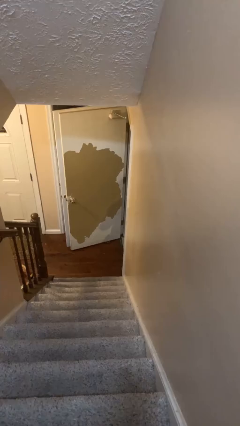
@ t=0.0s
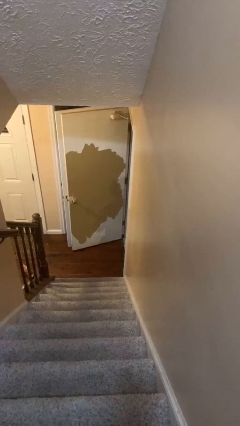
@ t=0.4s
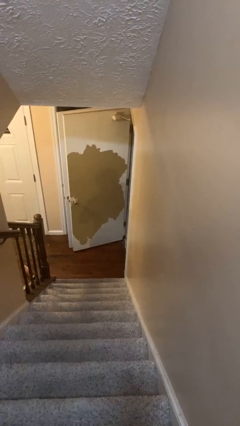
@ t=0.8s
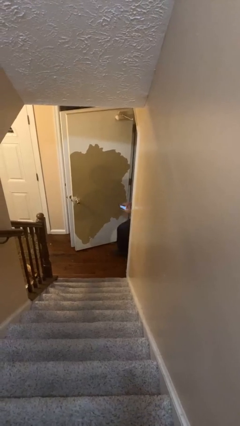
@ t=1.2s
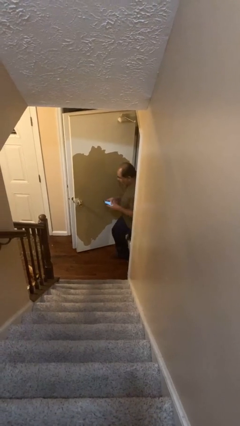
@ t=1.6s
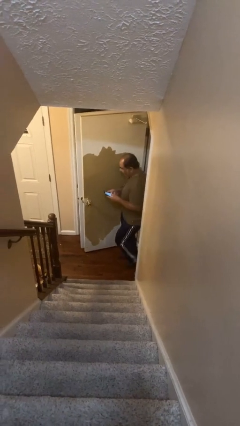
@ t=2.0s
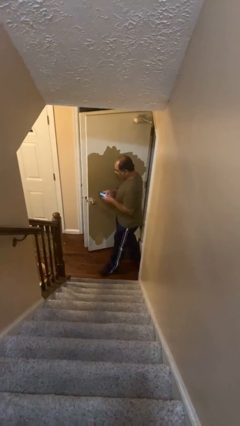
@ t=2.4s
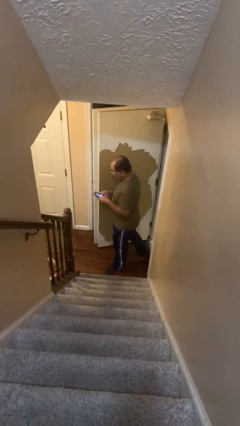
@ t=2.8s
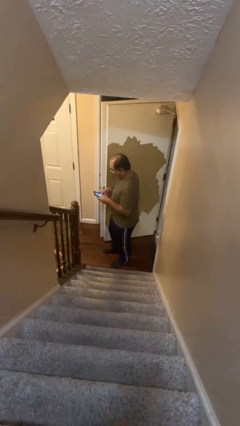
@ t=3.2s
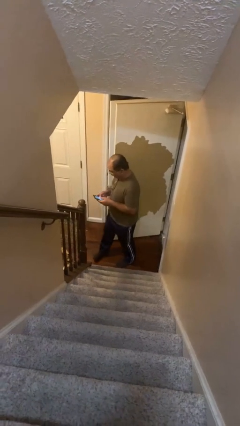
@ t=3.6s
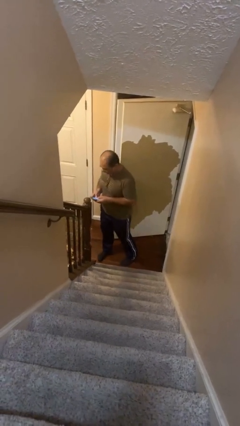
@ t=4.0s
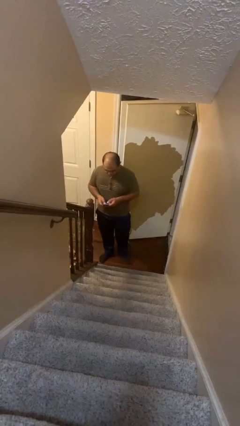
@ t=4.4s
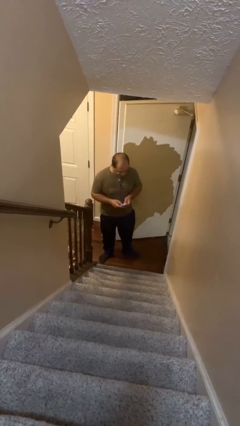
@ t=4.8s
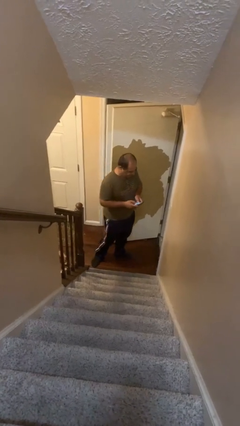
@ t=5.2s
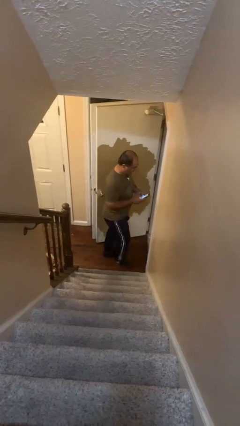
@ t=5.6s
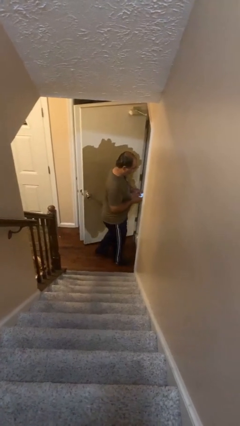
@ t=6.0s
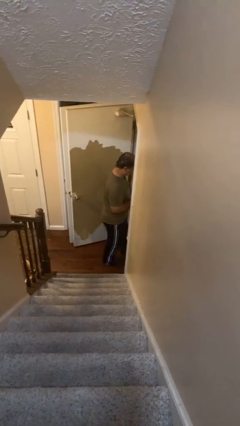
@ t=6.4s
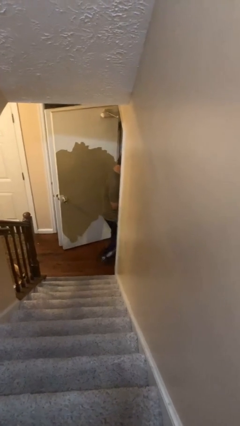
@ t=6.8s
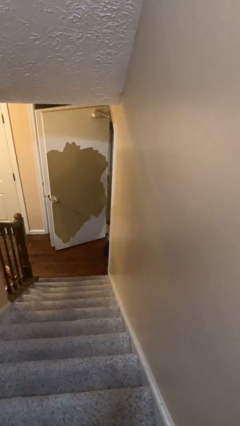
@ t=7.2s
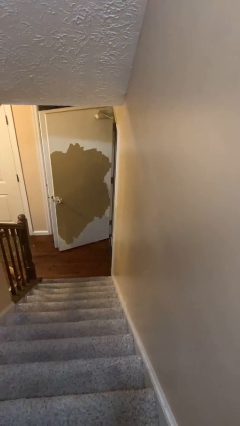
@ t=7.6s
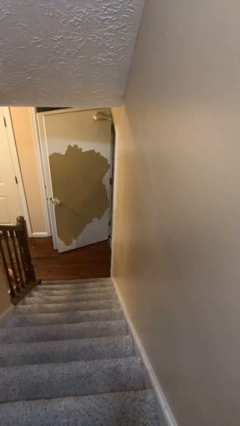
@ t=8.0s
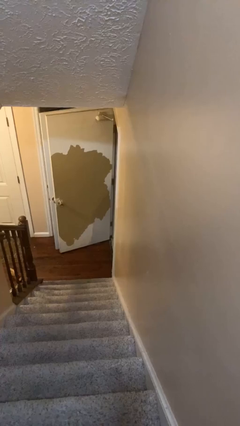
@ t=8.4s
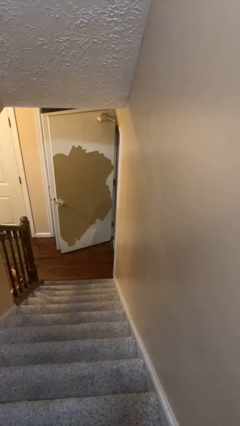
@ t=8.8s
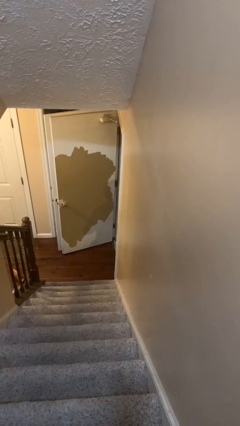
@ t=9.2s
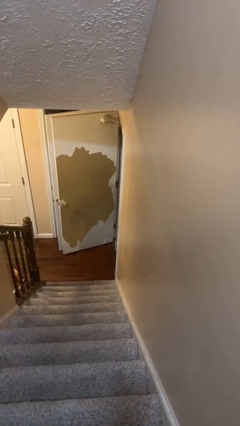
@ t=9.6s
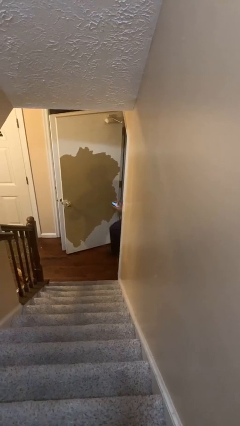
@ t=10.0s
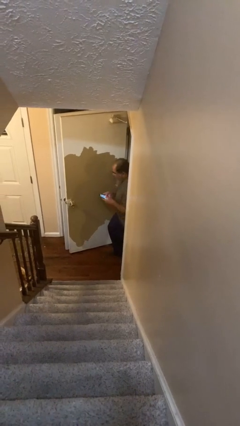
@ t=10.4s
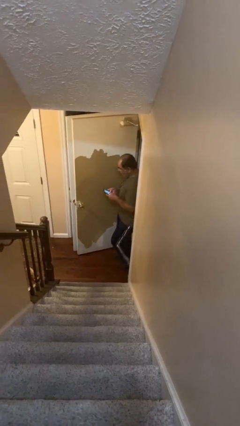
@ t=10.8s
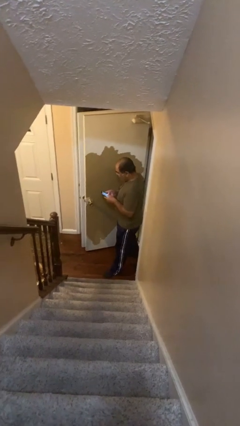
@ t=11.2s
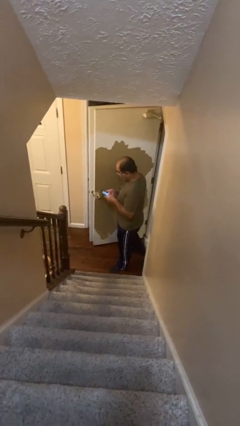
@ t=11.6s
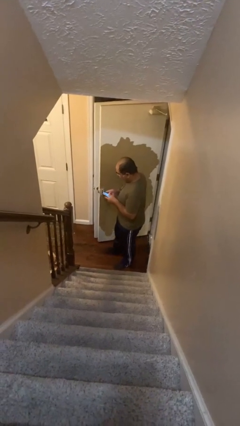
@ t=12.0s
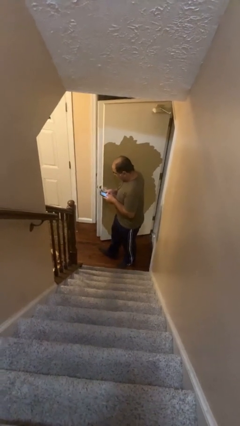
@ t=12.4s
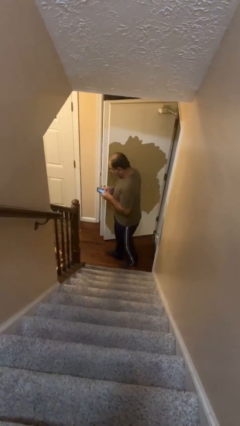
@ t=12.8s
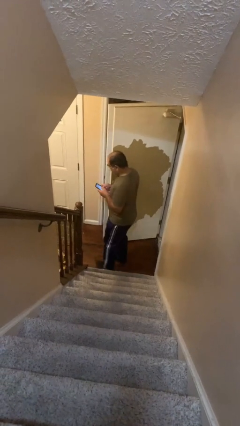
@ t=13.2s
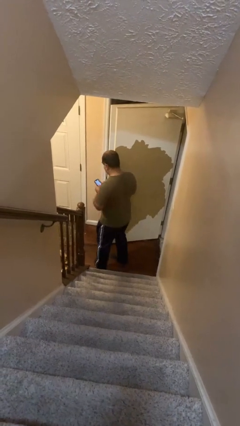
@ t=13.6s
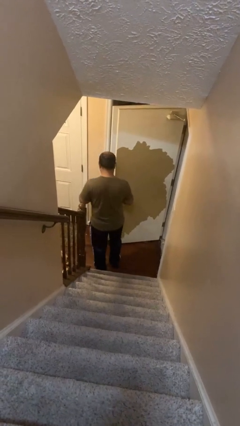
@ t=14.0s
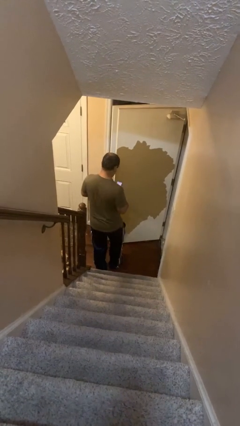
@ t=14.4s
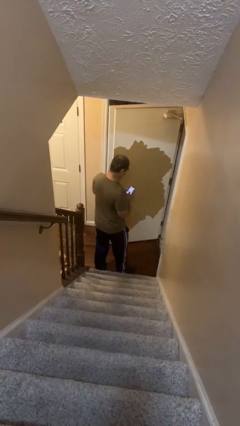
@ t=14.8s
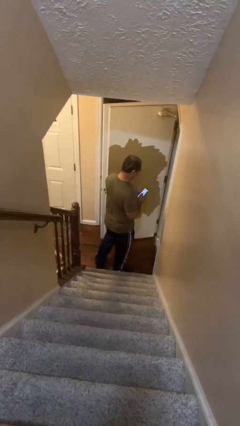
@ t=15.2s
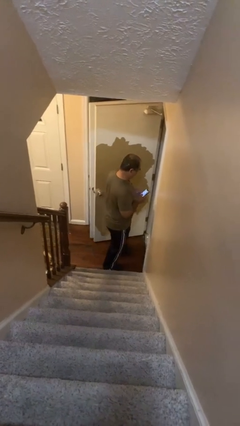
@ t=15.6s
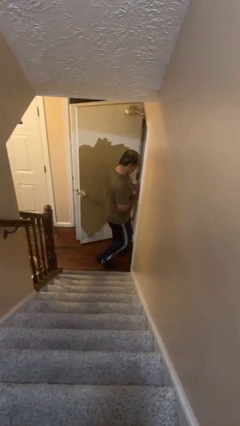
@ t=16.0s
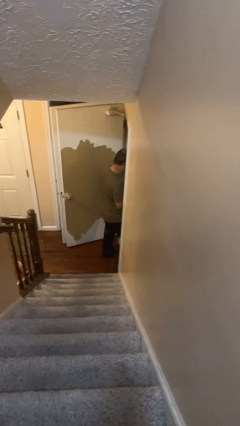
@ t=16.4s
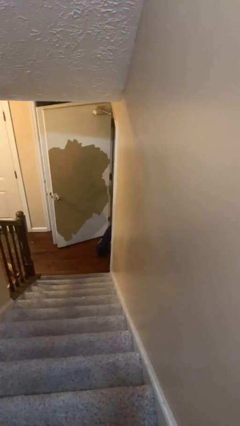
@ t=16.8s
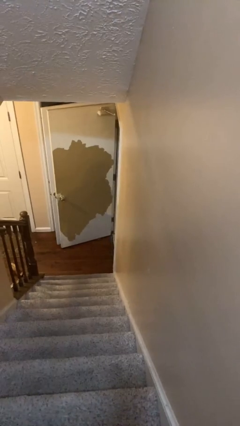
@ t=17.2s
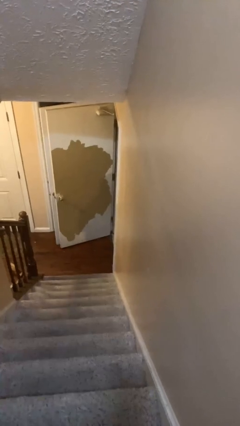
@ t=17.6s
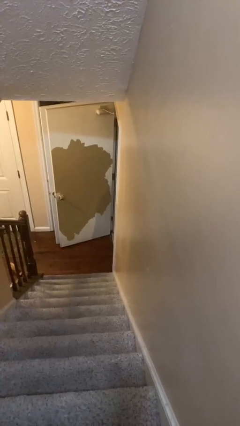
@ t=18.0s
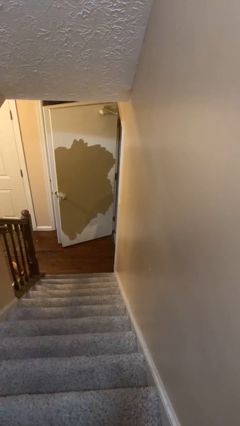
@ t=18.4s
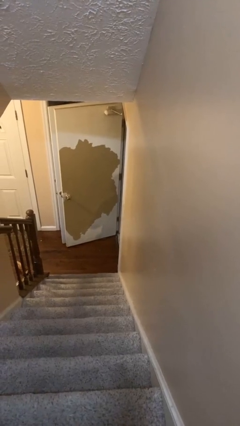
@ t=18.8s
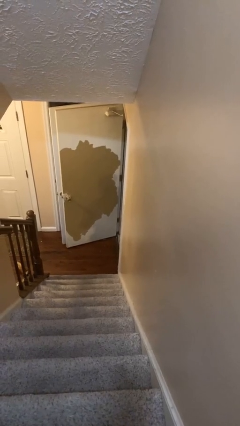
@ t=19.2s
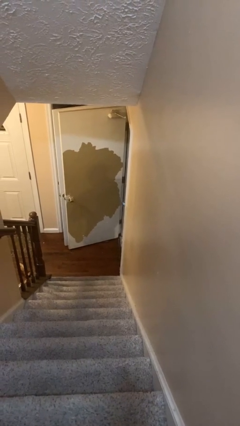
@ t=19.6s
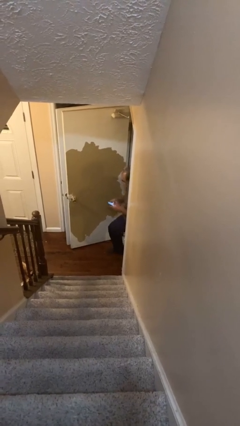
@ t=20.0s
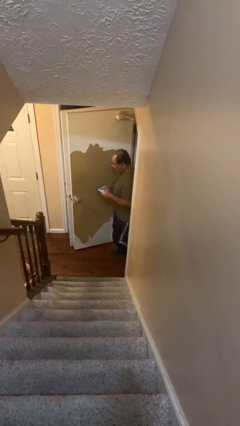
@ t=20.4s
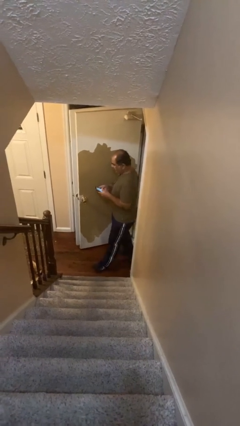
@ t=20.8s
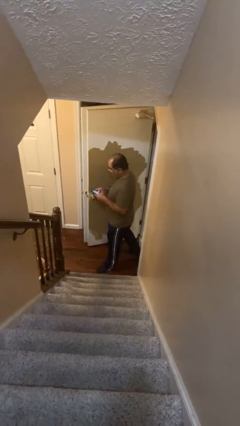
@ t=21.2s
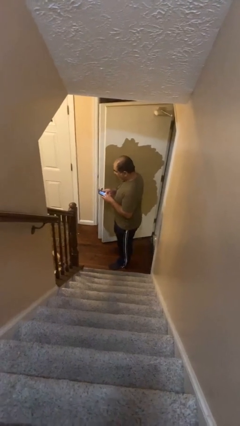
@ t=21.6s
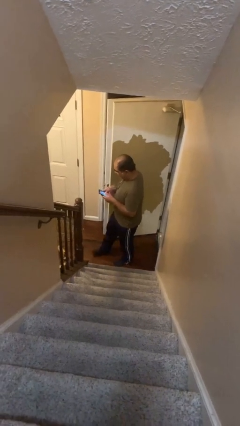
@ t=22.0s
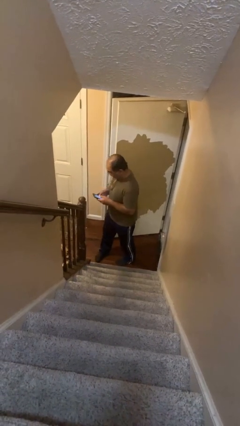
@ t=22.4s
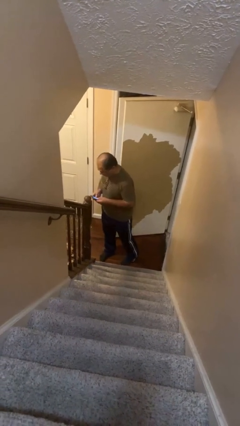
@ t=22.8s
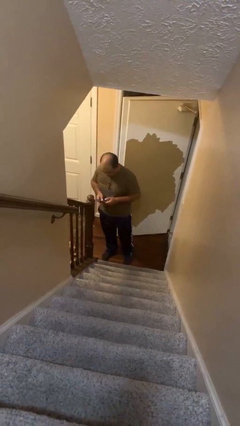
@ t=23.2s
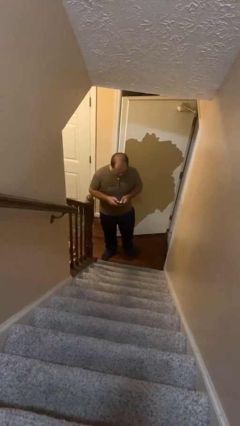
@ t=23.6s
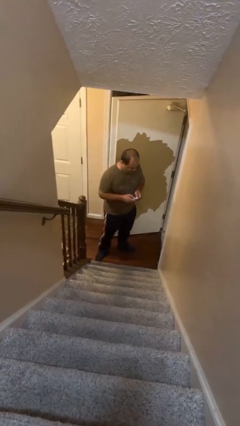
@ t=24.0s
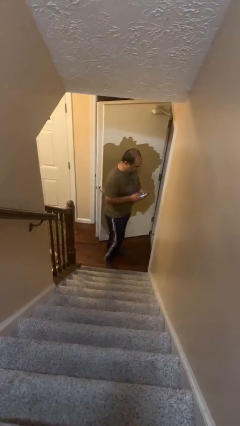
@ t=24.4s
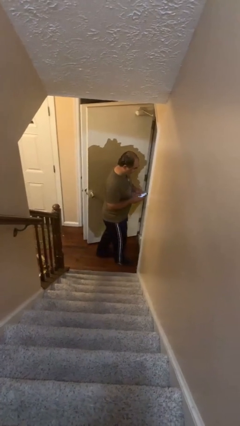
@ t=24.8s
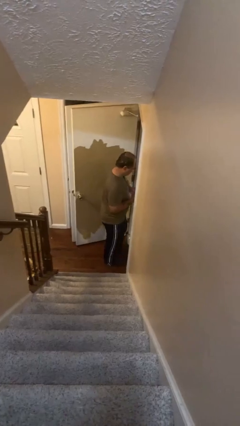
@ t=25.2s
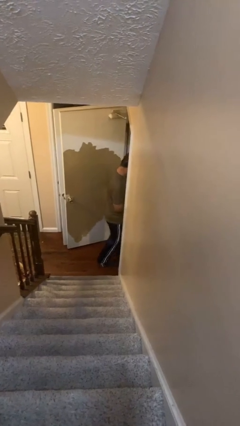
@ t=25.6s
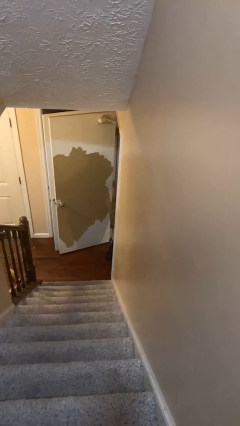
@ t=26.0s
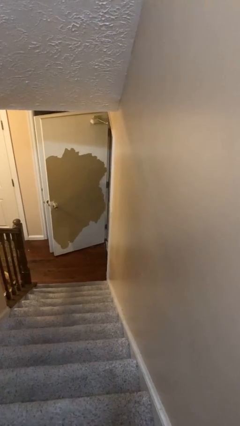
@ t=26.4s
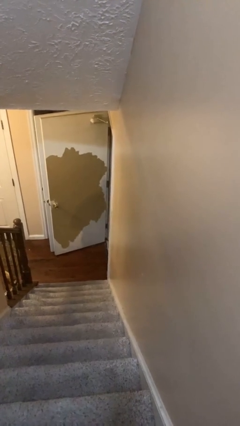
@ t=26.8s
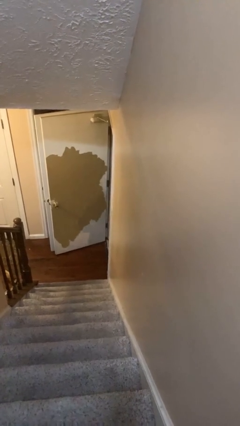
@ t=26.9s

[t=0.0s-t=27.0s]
person texts on phone

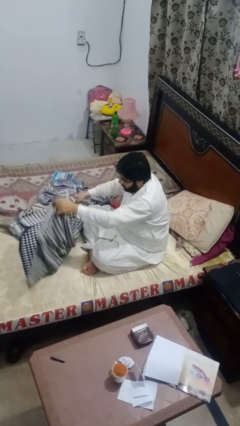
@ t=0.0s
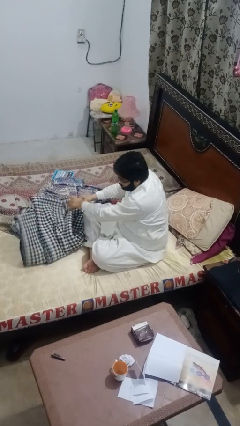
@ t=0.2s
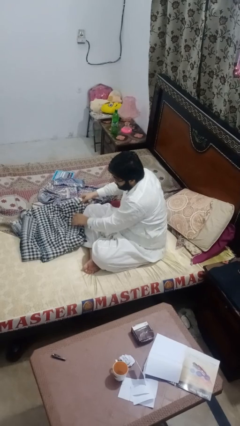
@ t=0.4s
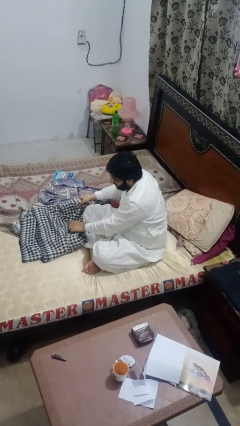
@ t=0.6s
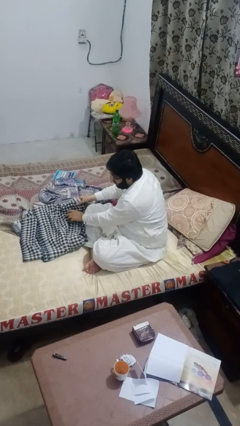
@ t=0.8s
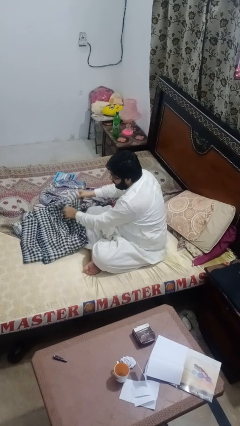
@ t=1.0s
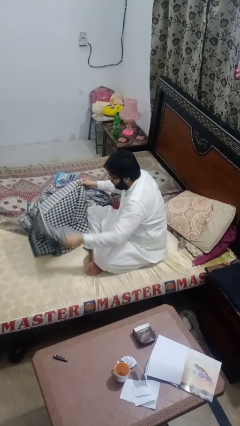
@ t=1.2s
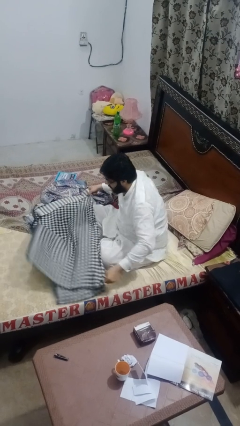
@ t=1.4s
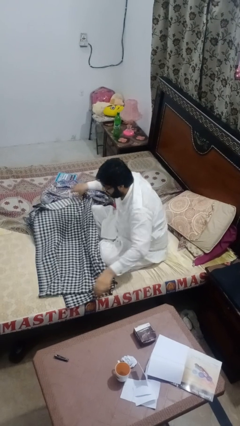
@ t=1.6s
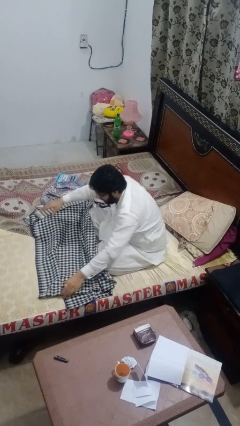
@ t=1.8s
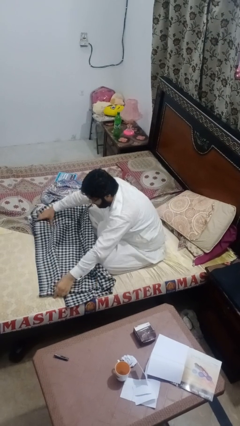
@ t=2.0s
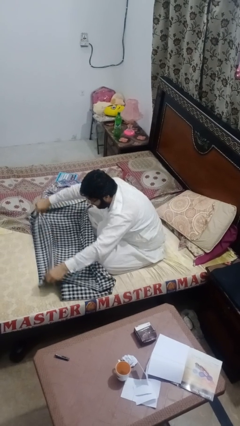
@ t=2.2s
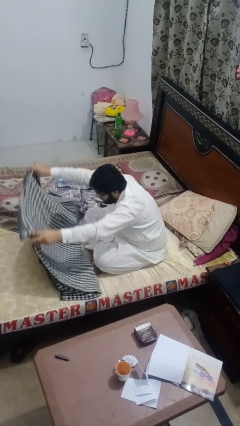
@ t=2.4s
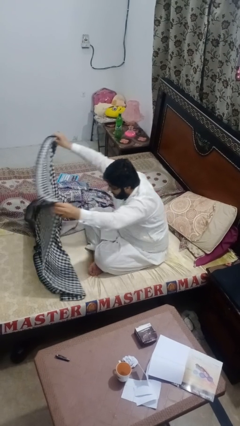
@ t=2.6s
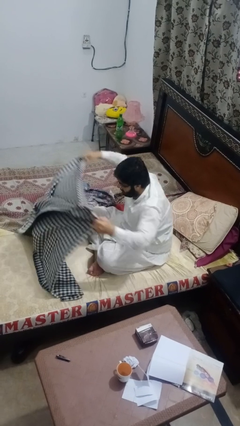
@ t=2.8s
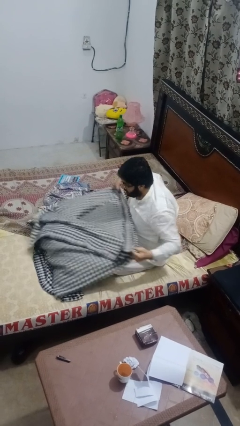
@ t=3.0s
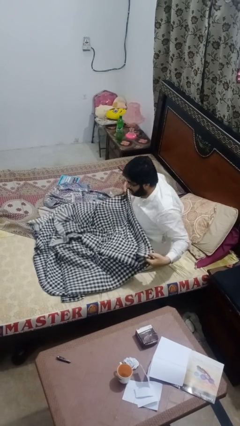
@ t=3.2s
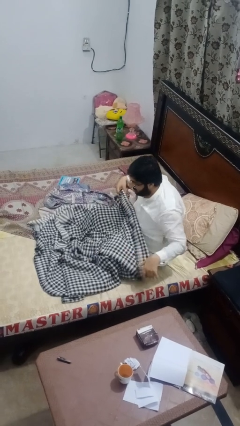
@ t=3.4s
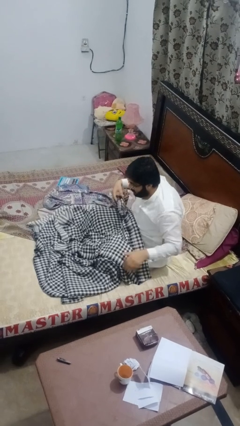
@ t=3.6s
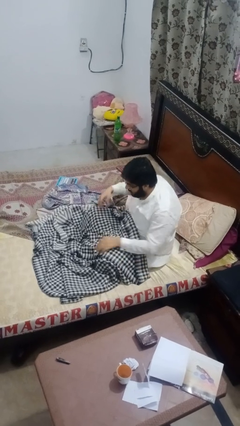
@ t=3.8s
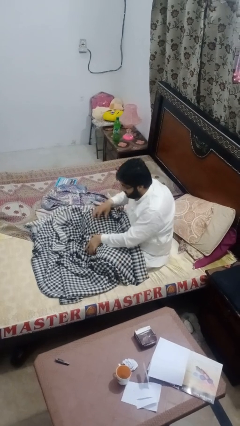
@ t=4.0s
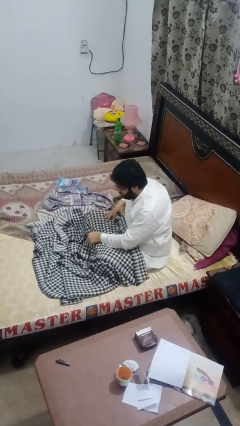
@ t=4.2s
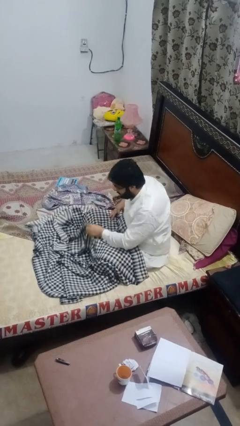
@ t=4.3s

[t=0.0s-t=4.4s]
person unfolds blanket
